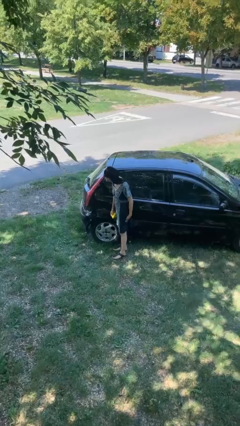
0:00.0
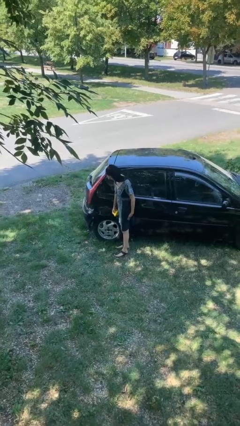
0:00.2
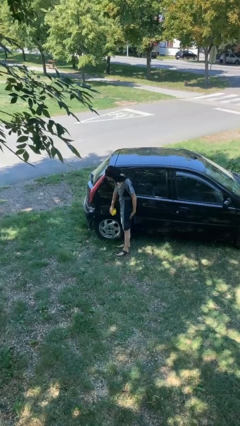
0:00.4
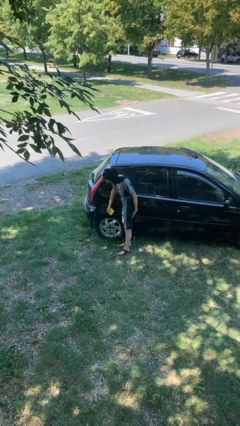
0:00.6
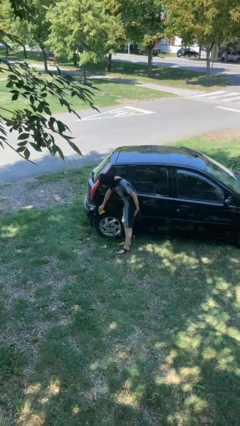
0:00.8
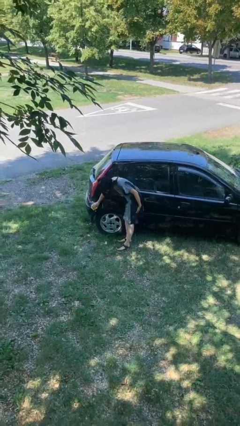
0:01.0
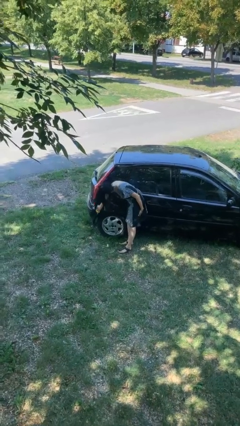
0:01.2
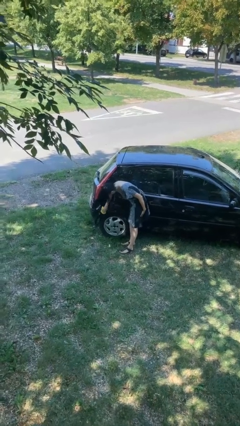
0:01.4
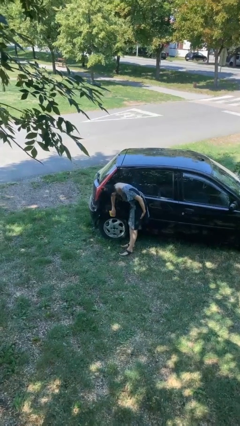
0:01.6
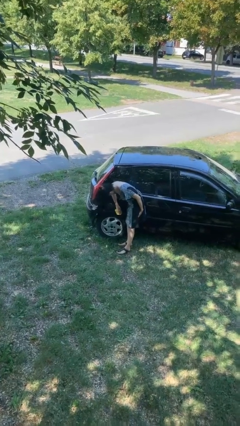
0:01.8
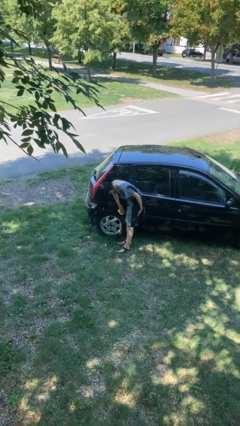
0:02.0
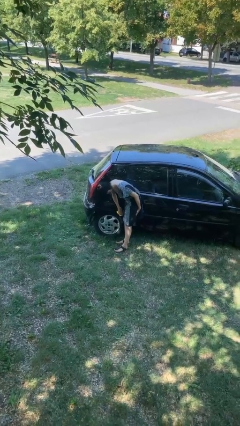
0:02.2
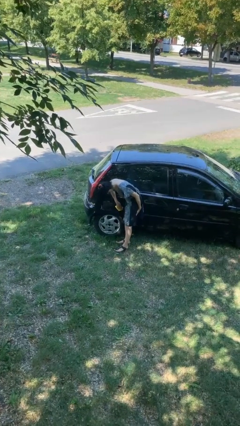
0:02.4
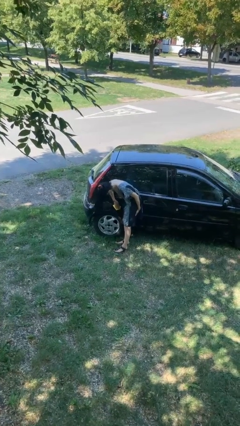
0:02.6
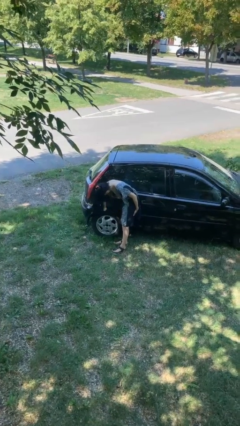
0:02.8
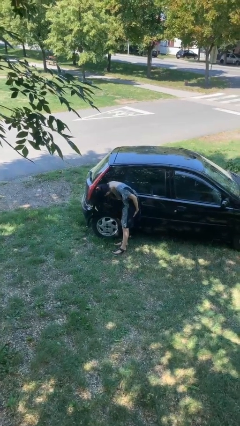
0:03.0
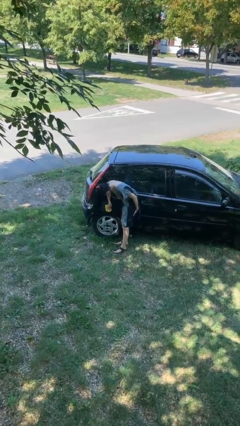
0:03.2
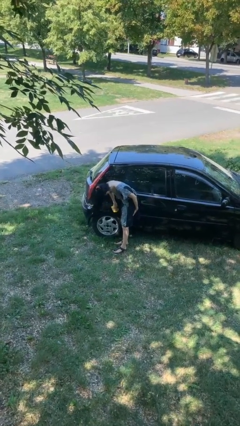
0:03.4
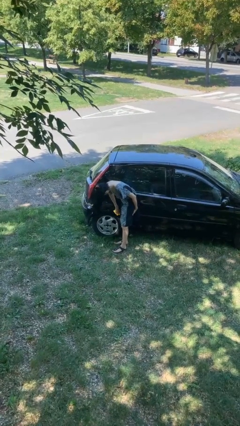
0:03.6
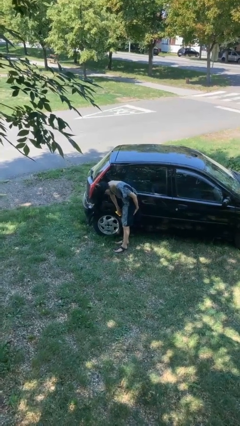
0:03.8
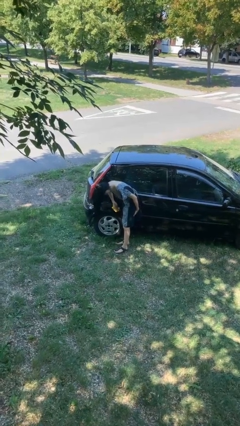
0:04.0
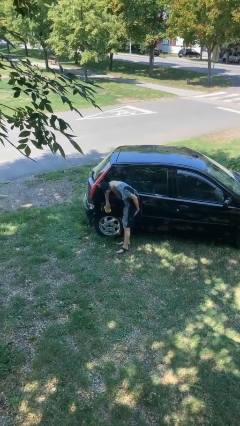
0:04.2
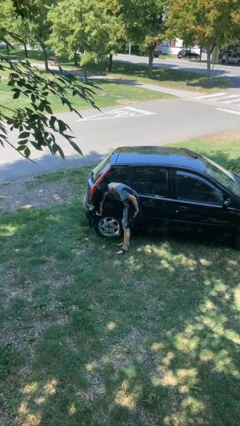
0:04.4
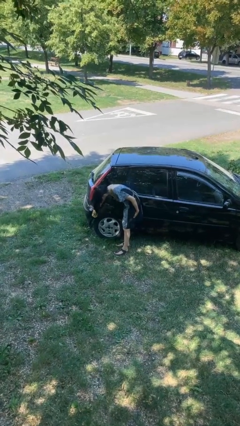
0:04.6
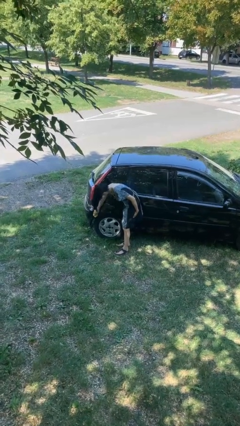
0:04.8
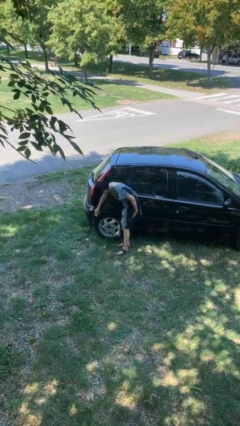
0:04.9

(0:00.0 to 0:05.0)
person polishes car with rag

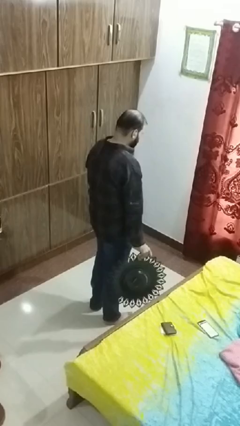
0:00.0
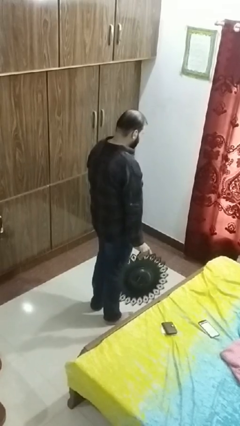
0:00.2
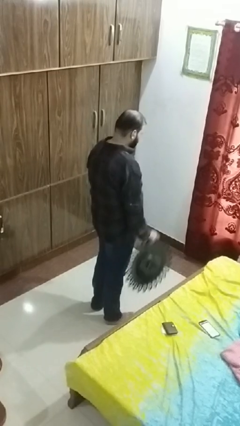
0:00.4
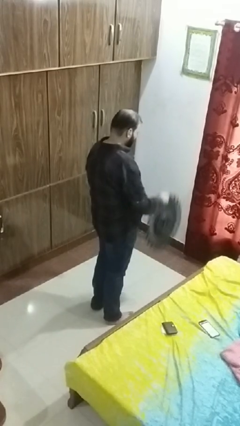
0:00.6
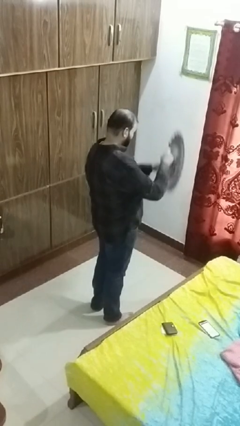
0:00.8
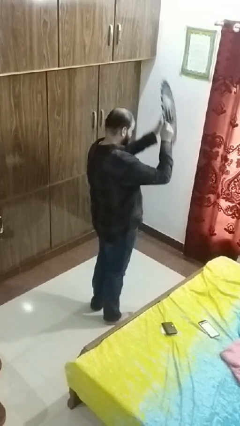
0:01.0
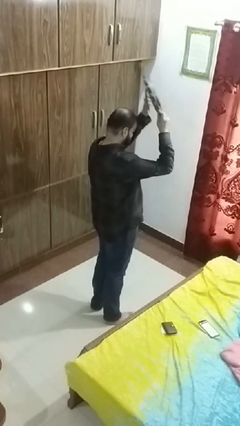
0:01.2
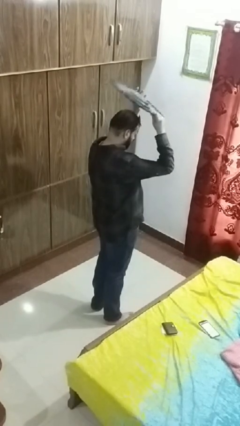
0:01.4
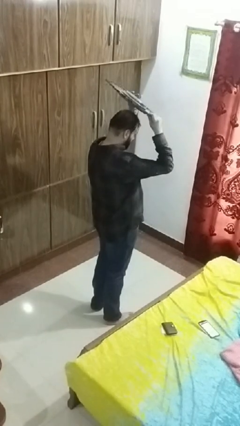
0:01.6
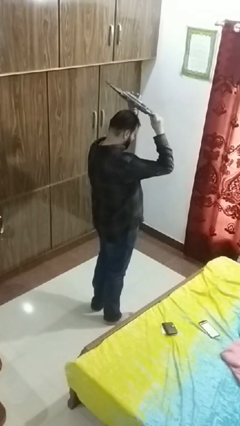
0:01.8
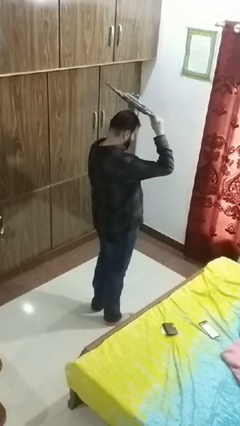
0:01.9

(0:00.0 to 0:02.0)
person holds object above head

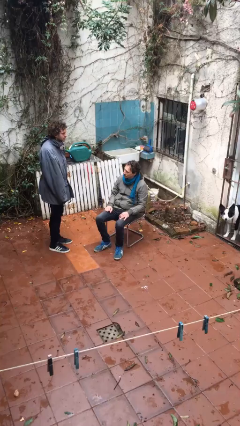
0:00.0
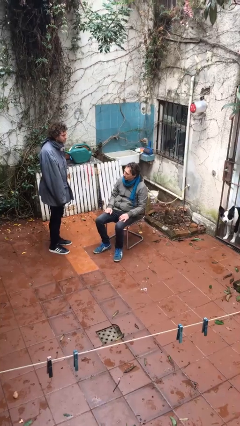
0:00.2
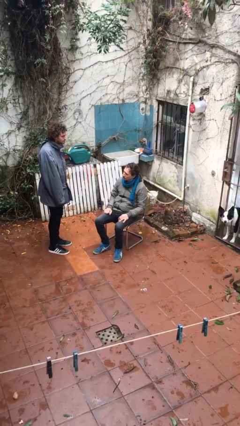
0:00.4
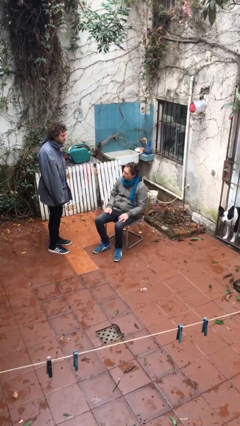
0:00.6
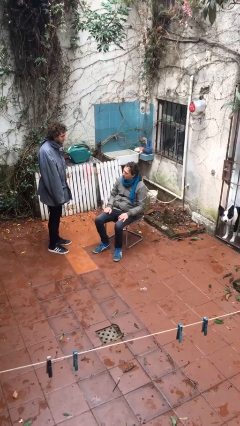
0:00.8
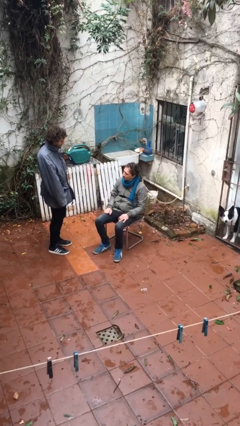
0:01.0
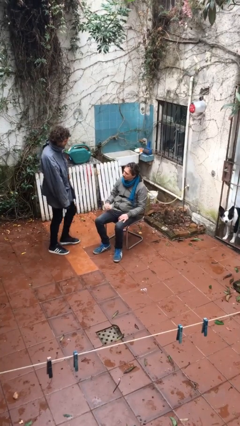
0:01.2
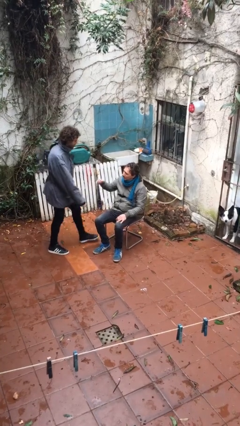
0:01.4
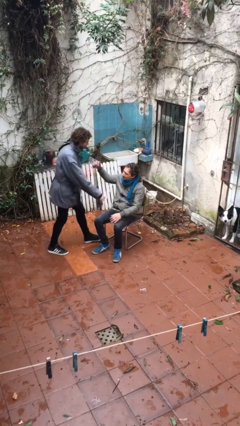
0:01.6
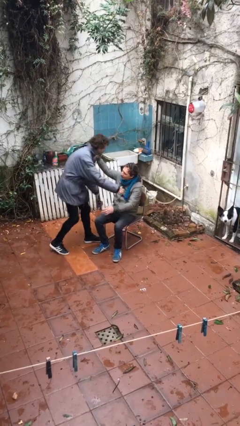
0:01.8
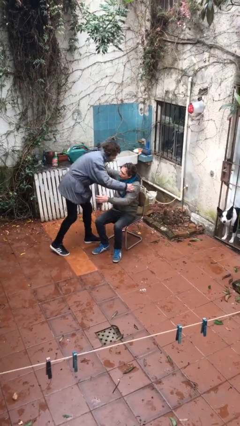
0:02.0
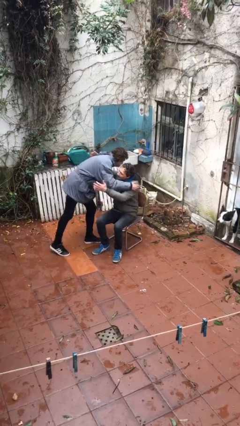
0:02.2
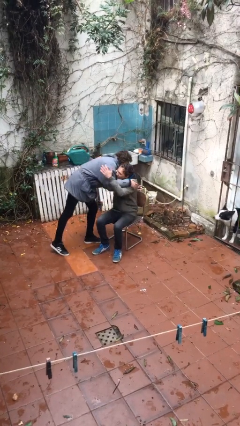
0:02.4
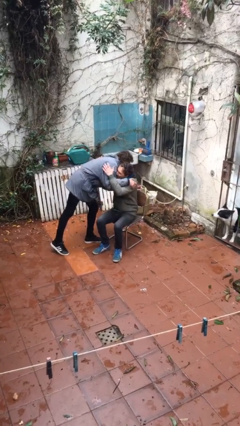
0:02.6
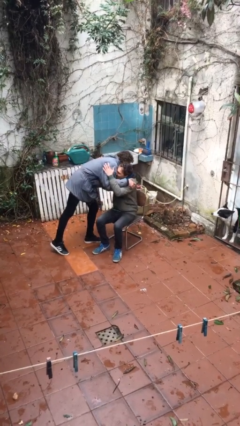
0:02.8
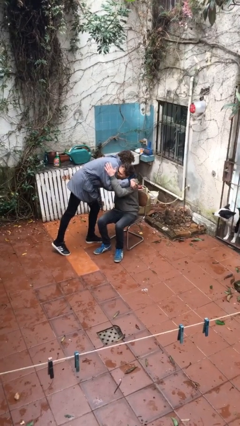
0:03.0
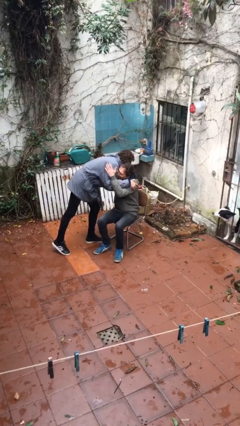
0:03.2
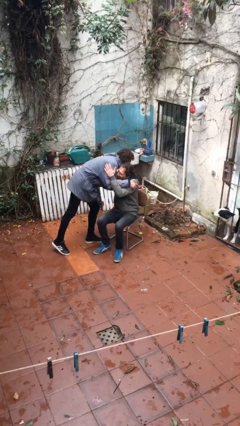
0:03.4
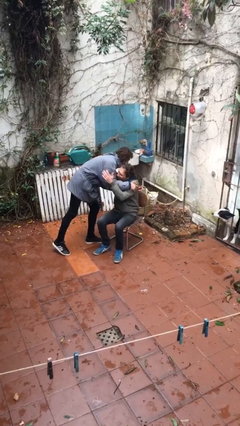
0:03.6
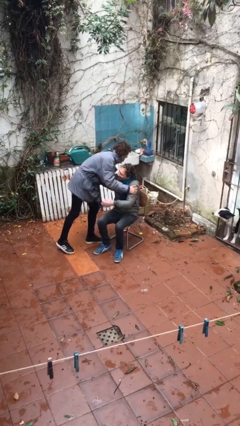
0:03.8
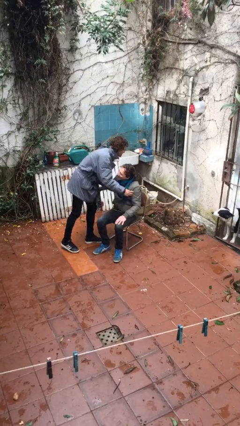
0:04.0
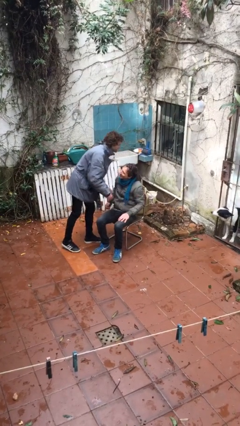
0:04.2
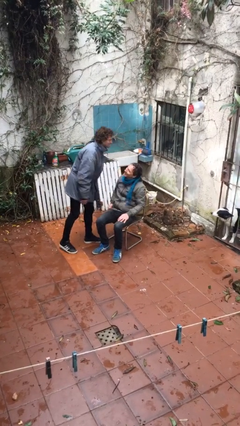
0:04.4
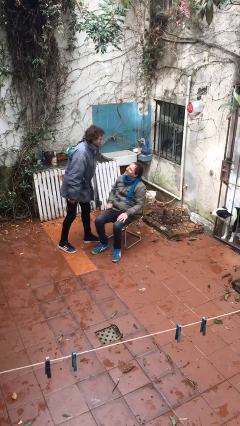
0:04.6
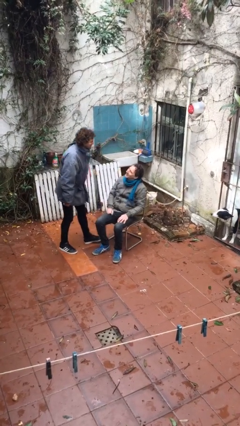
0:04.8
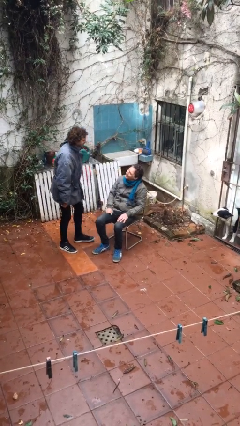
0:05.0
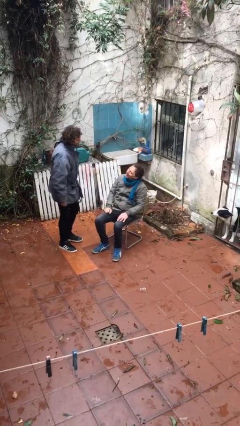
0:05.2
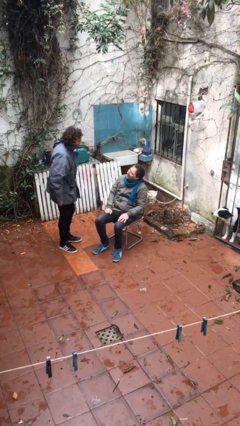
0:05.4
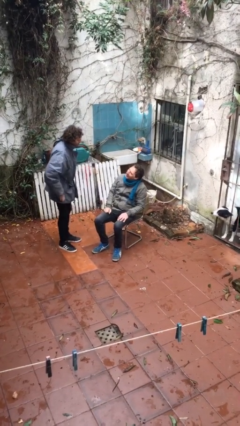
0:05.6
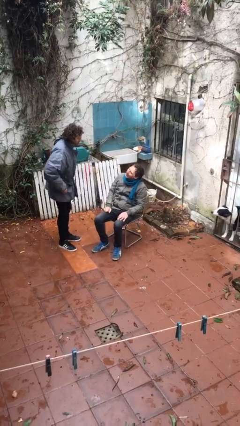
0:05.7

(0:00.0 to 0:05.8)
person embraces person

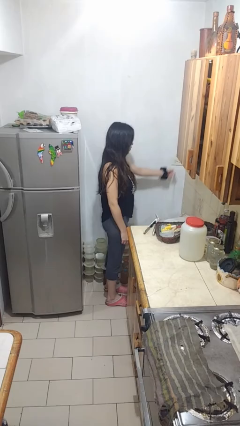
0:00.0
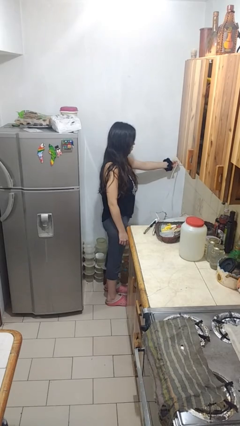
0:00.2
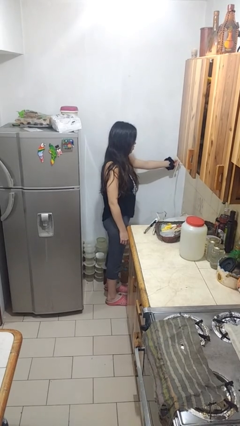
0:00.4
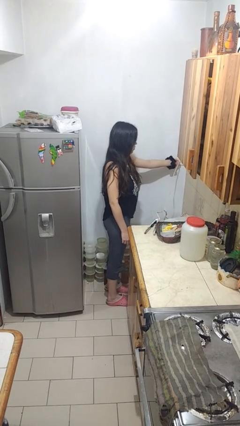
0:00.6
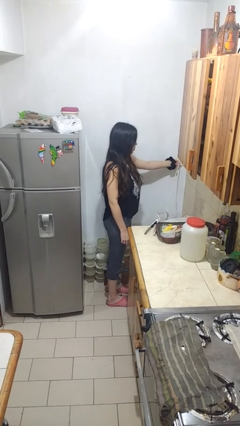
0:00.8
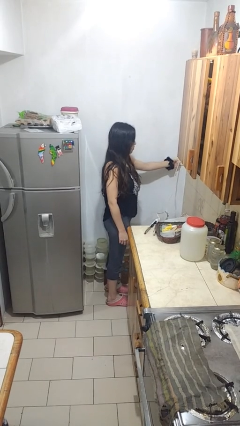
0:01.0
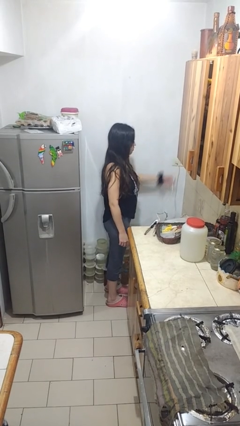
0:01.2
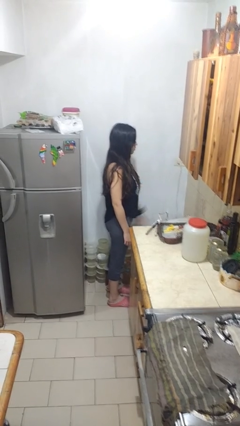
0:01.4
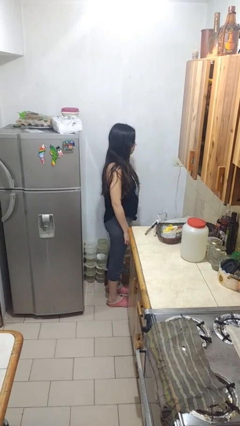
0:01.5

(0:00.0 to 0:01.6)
person plugs into electrical socket

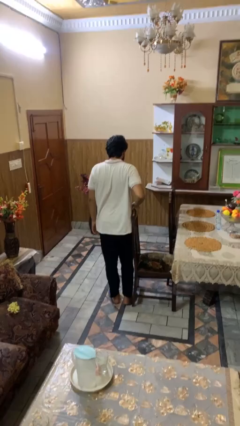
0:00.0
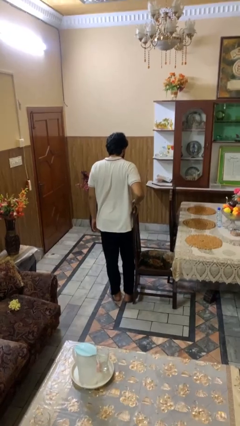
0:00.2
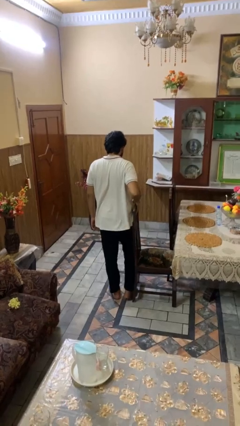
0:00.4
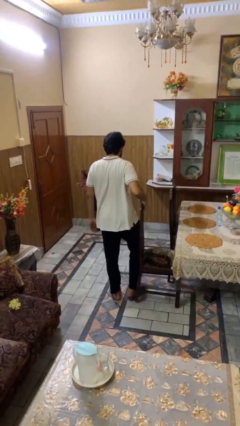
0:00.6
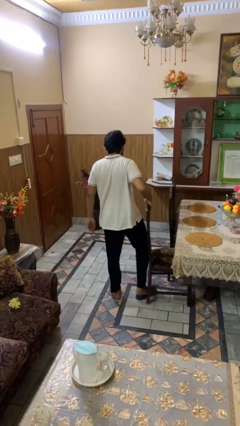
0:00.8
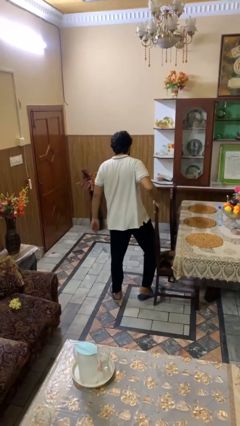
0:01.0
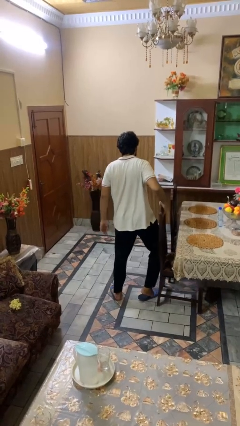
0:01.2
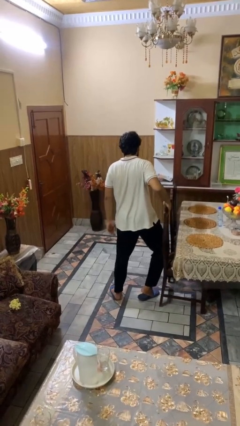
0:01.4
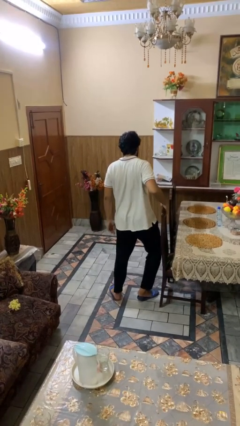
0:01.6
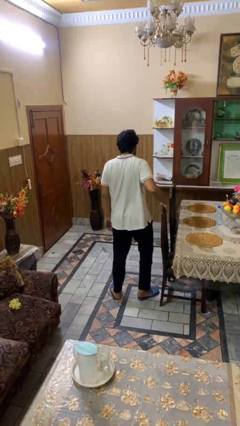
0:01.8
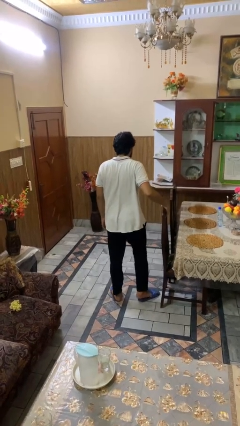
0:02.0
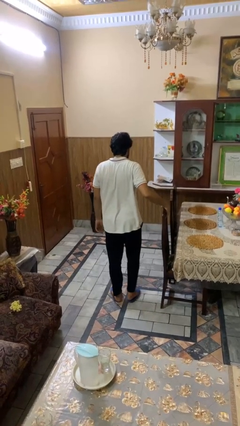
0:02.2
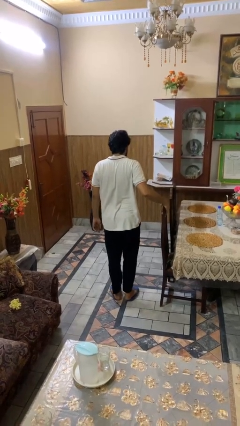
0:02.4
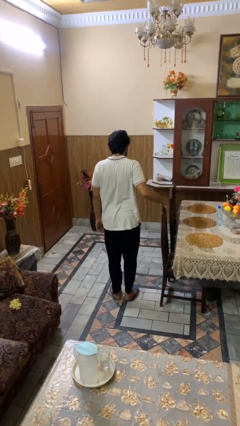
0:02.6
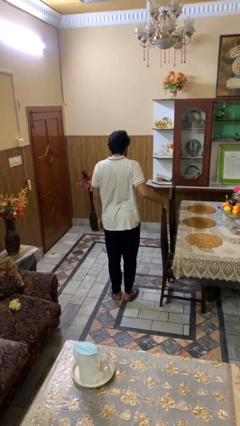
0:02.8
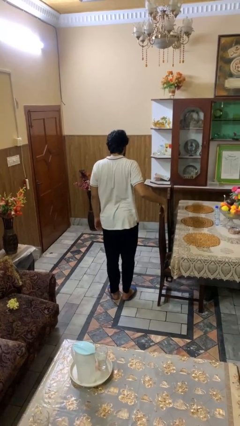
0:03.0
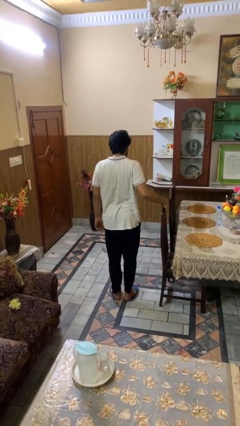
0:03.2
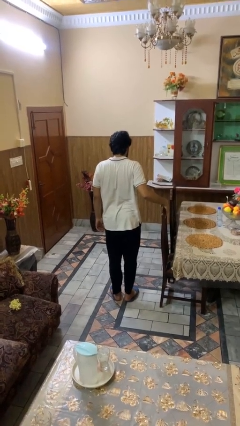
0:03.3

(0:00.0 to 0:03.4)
person pushes in chair
